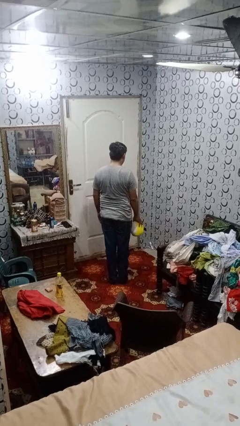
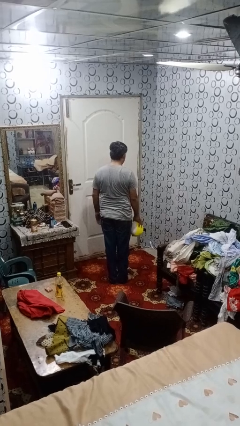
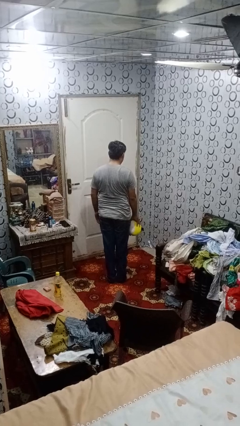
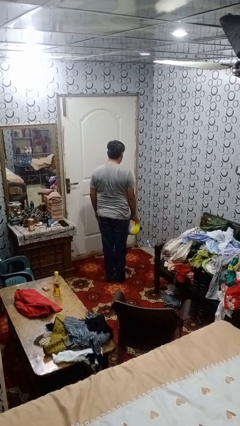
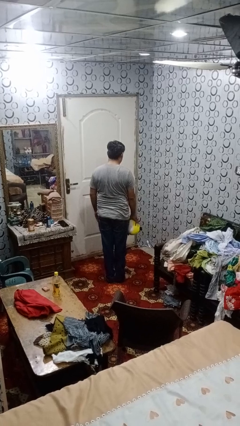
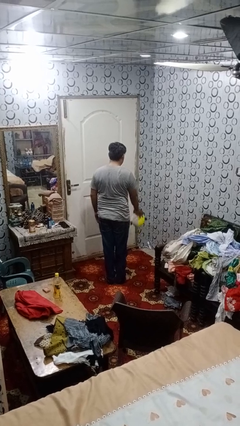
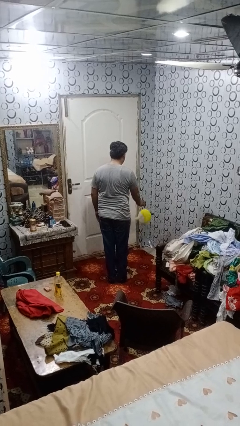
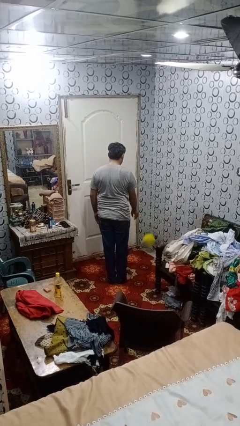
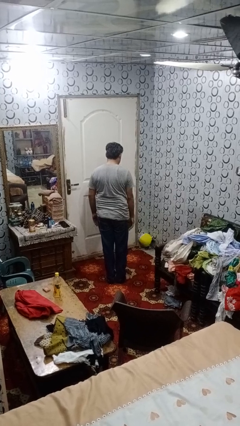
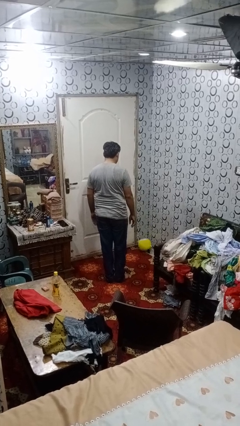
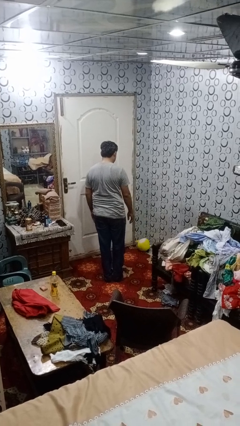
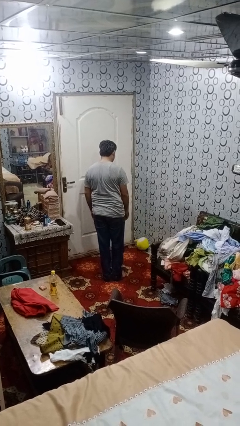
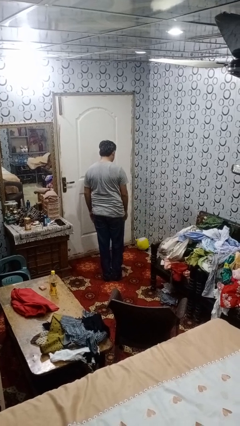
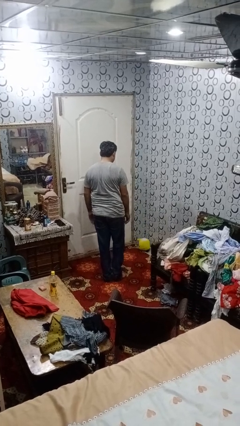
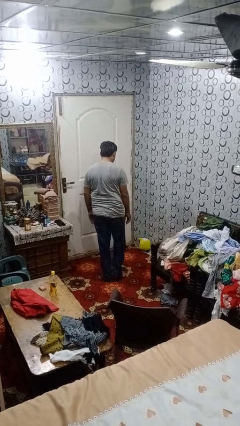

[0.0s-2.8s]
person throws object to ground

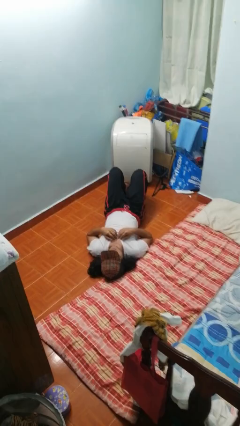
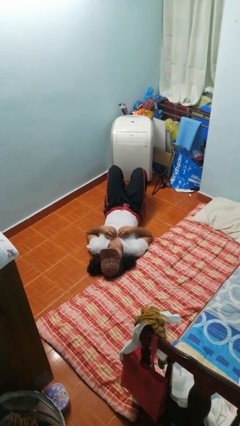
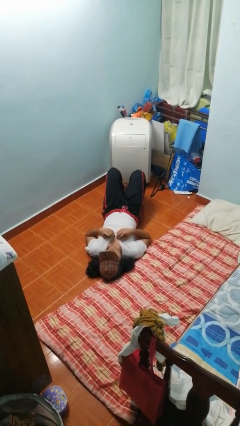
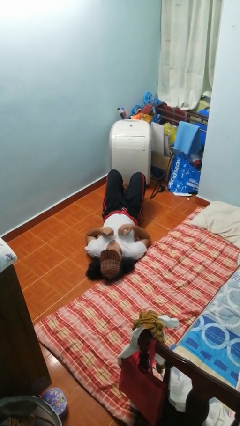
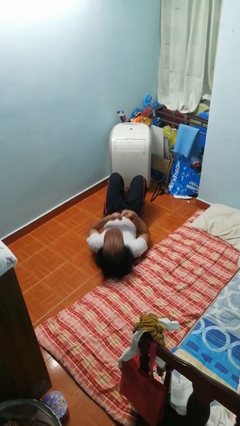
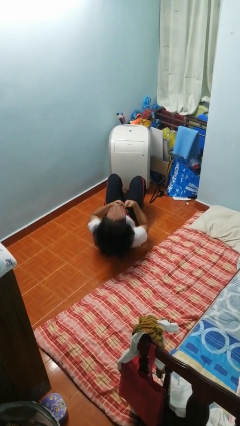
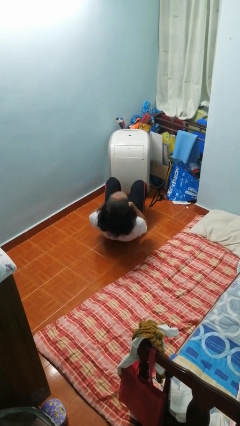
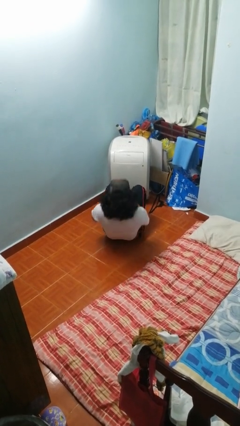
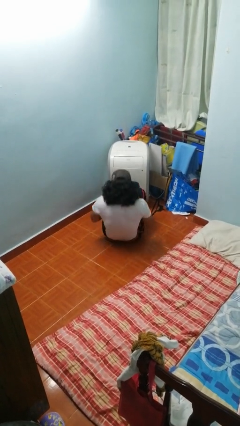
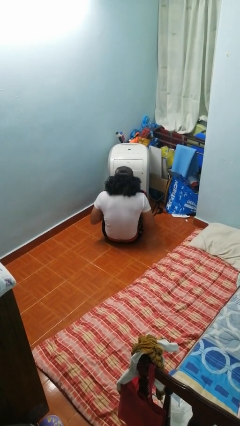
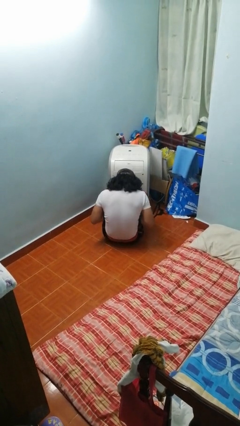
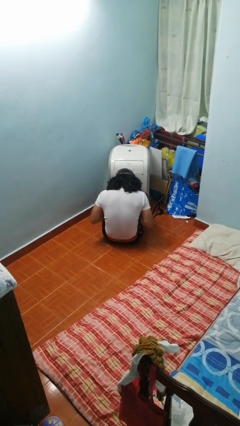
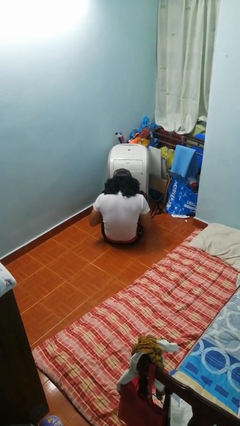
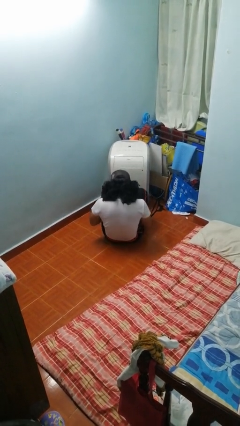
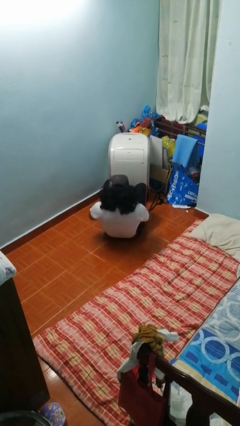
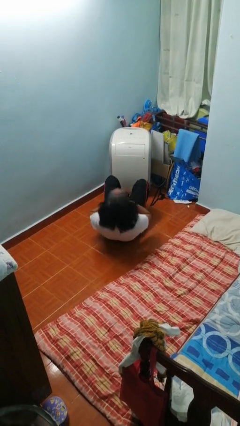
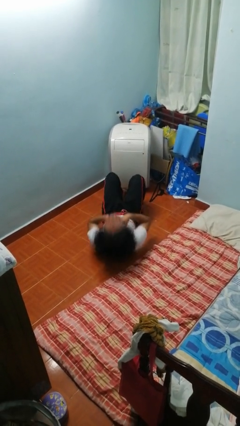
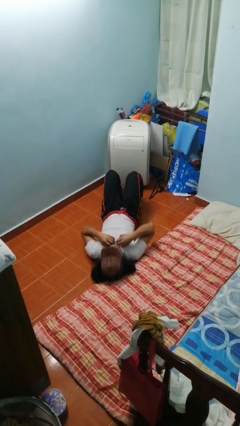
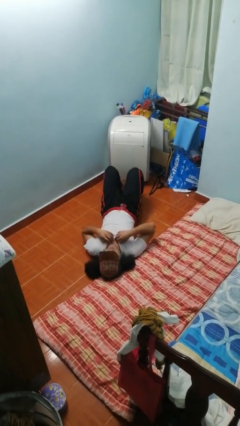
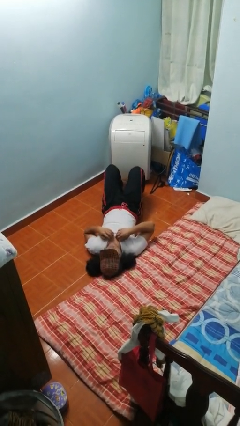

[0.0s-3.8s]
person exercises with situp

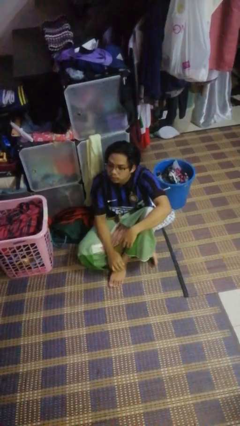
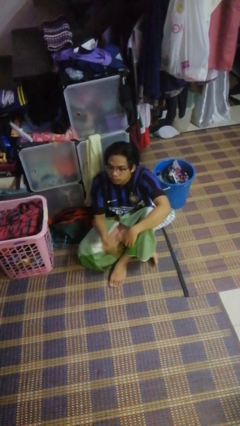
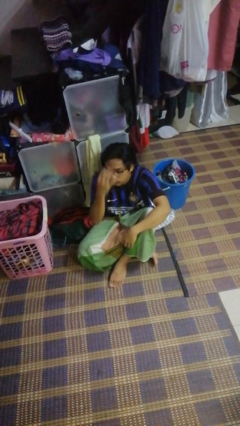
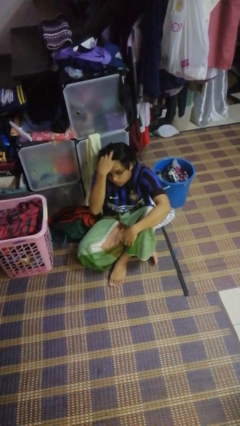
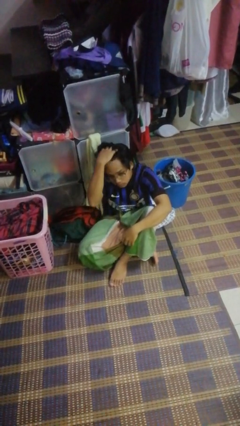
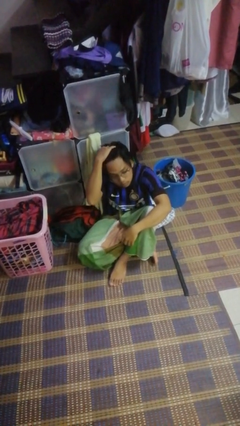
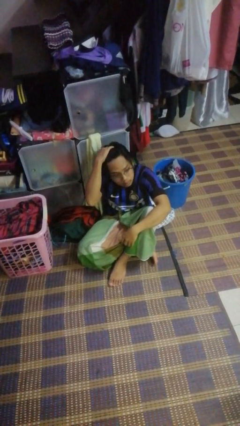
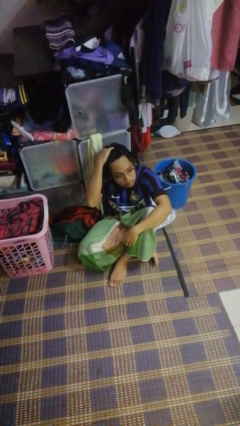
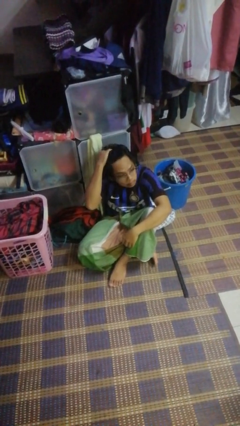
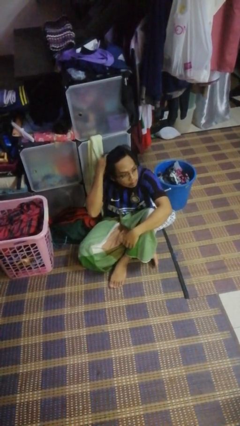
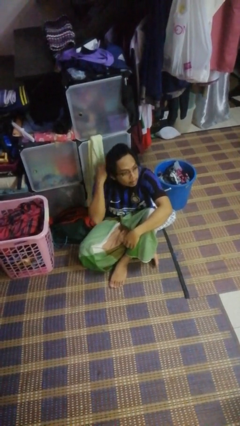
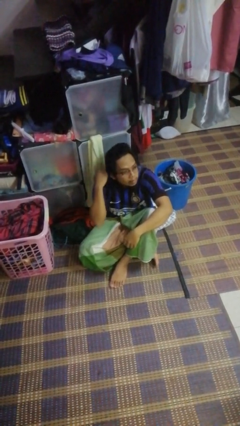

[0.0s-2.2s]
person strokes hair

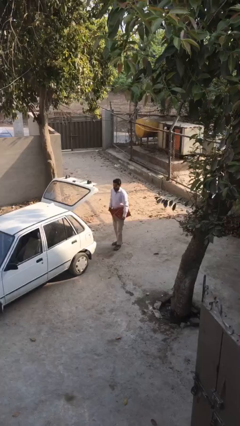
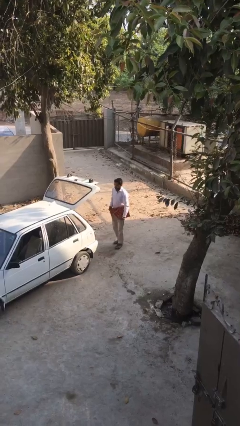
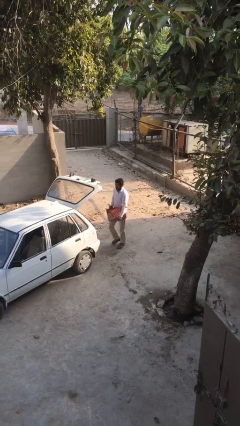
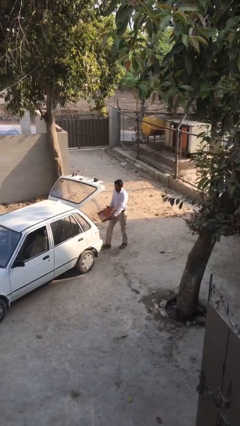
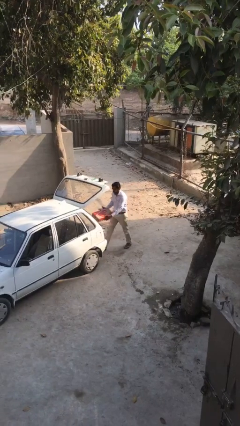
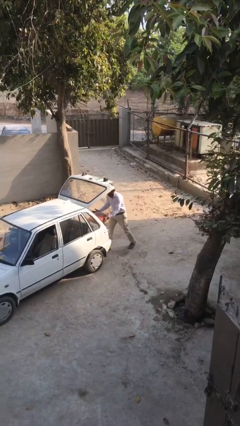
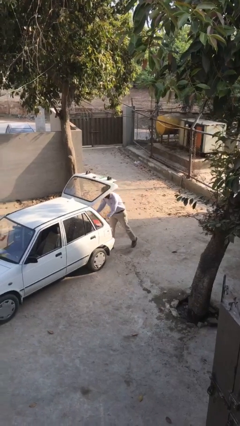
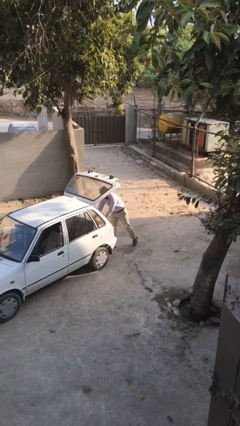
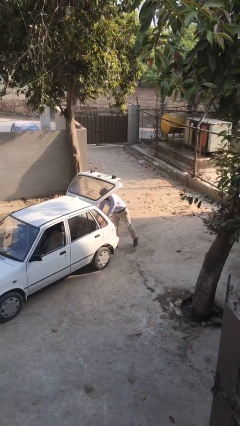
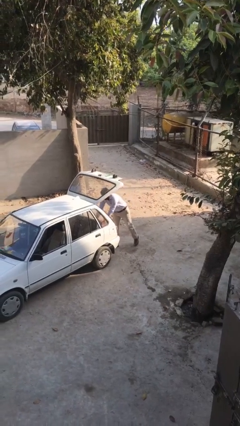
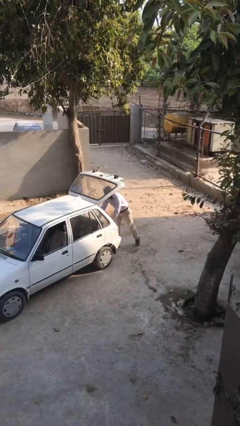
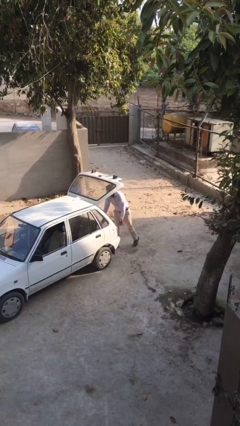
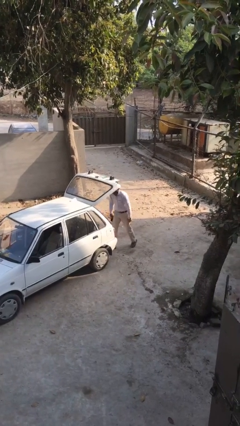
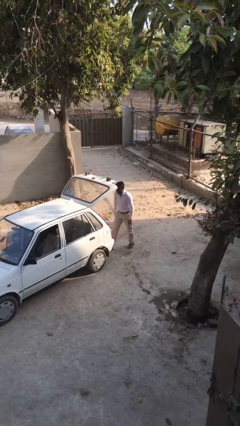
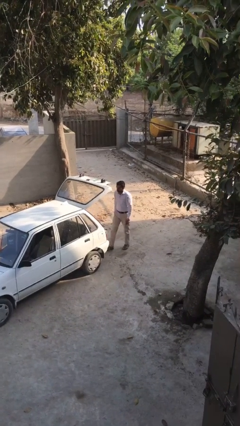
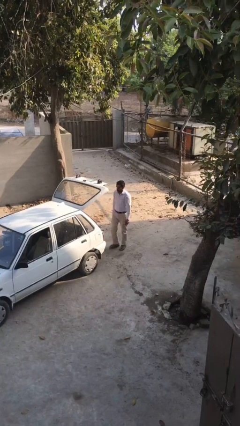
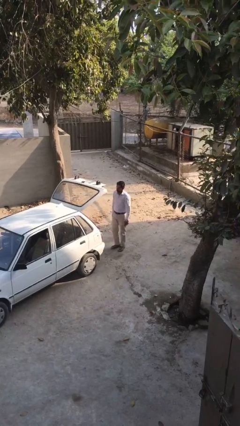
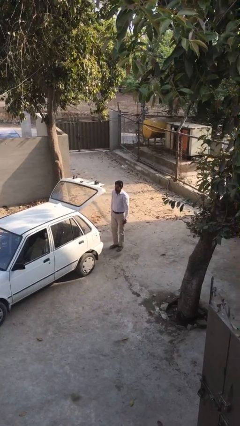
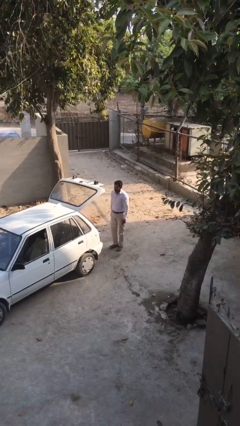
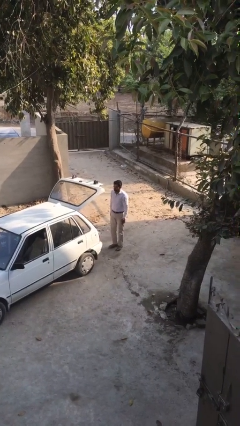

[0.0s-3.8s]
person loads car

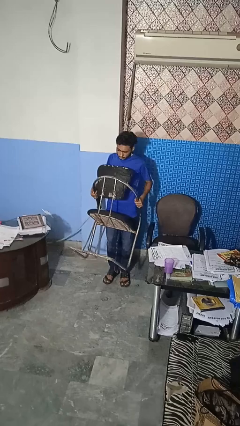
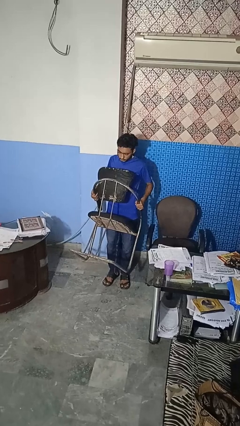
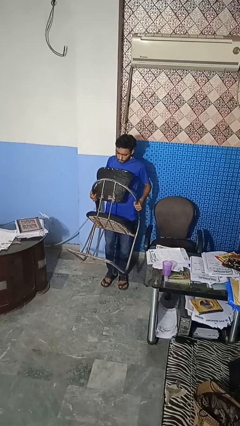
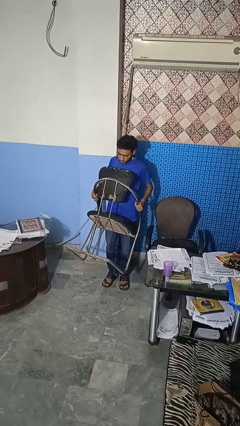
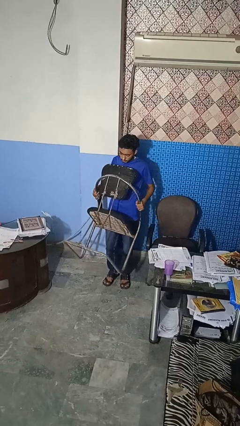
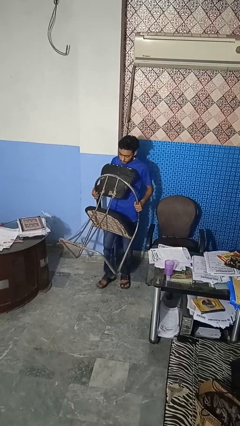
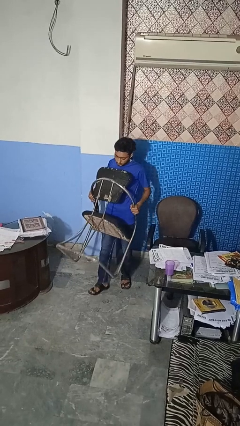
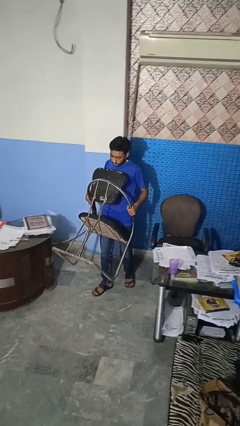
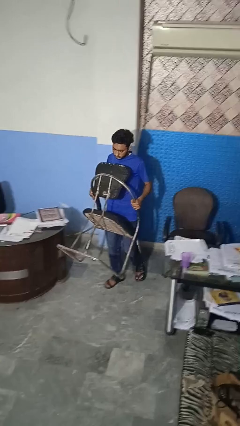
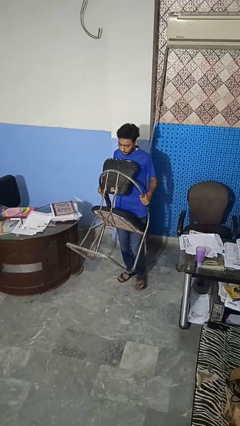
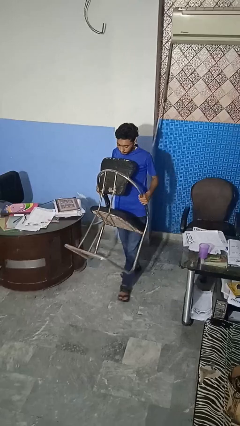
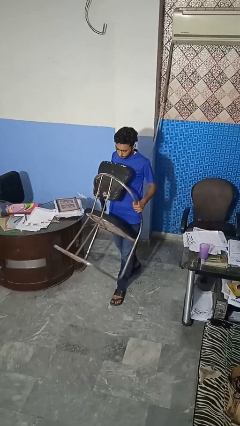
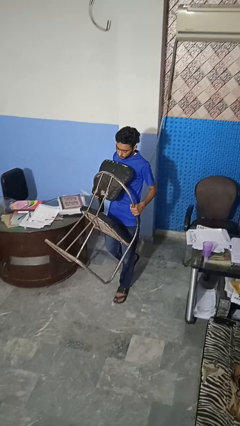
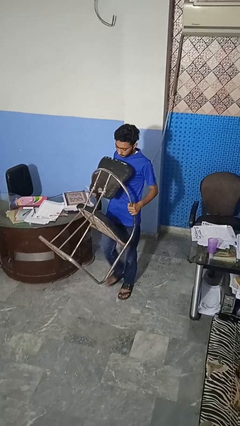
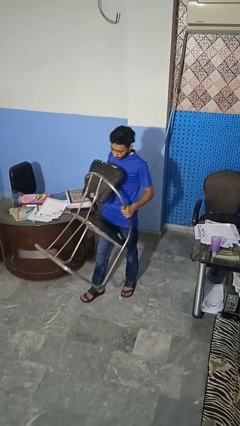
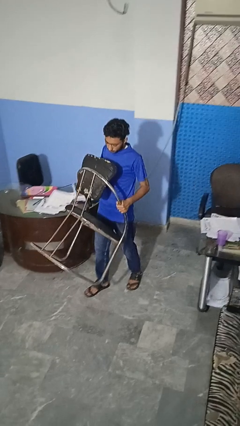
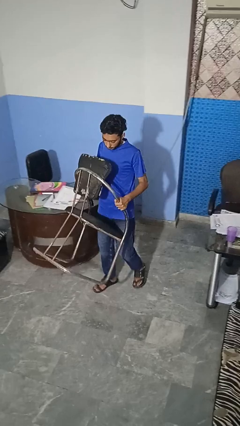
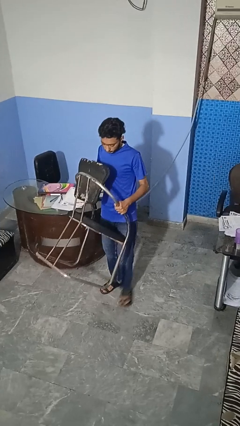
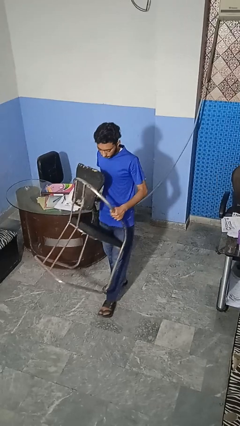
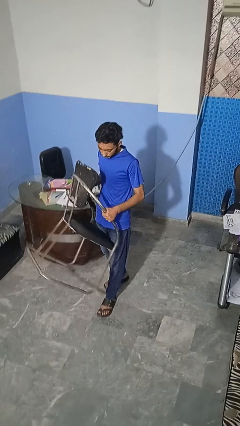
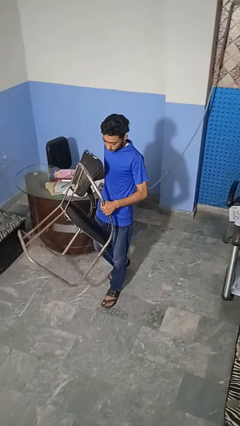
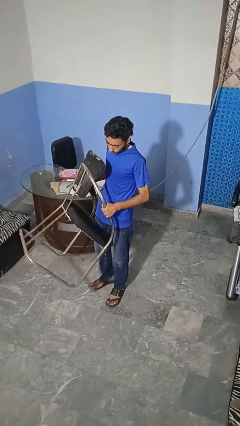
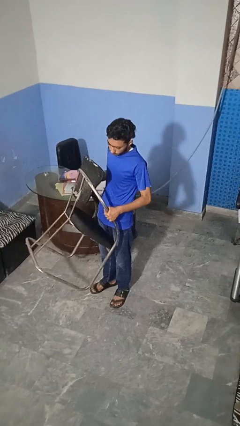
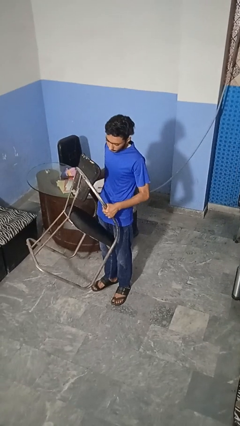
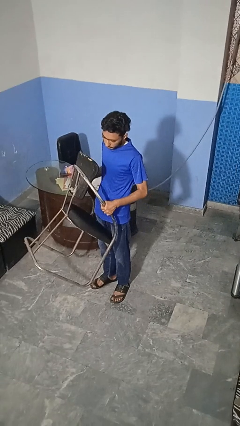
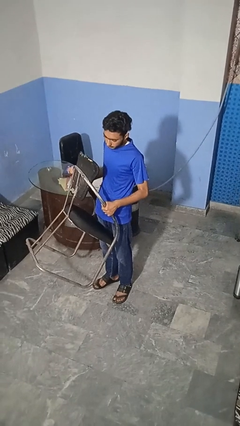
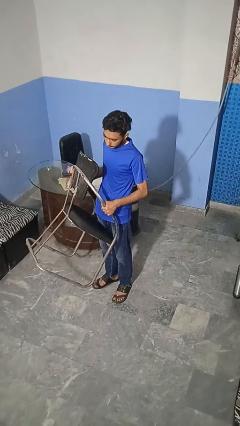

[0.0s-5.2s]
person carries furniture
